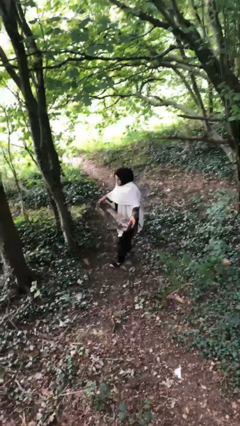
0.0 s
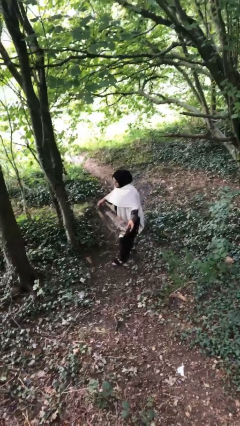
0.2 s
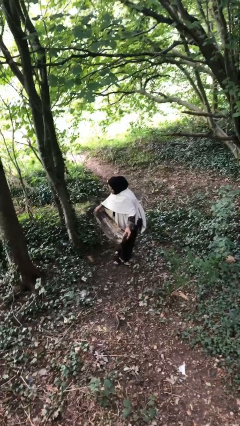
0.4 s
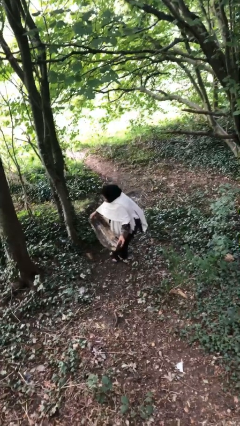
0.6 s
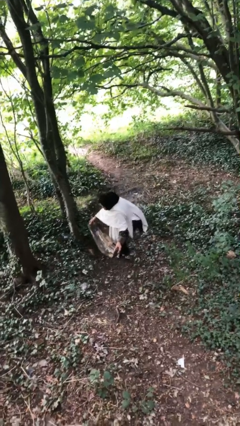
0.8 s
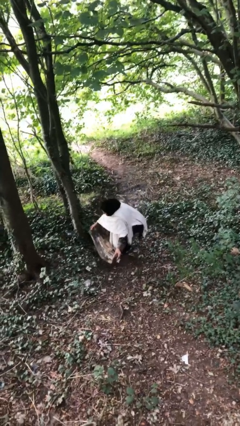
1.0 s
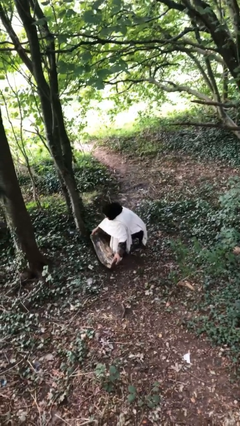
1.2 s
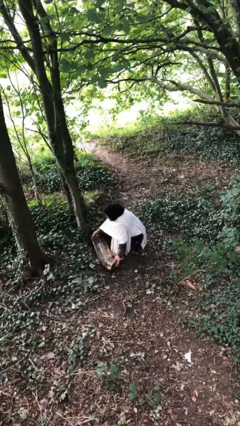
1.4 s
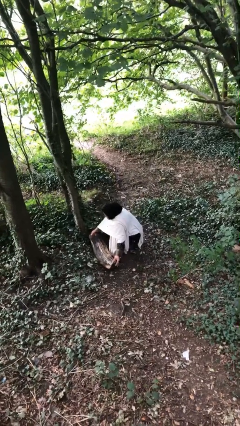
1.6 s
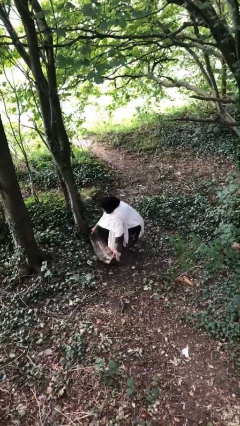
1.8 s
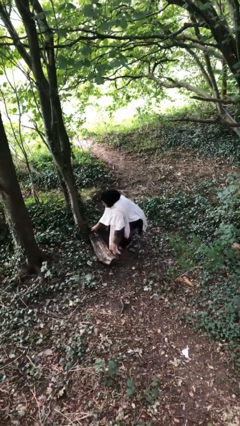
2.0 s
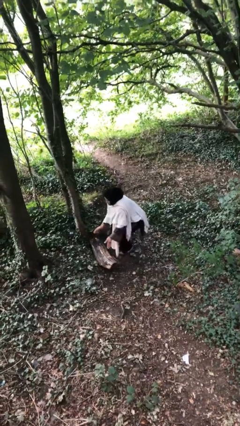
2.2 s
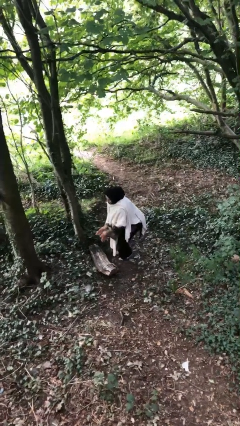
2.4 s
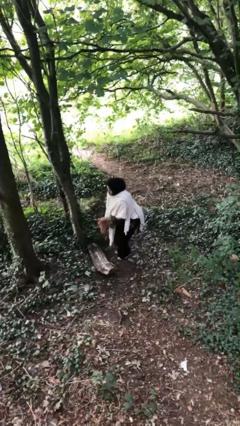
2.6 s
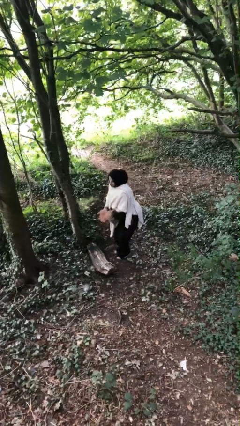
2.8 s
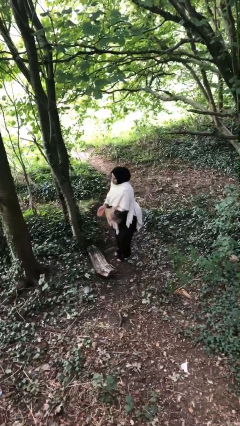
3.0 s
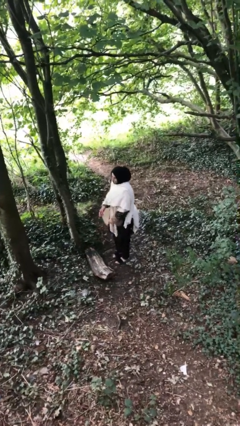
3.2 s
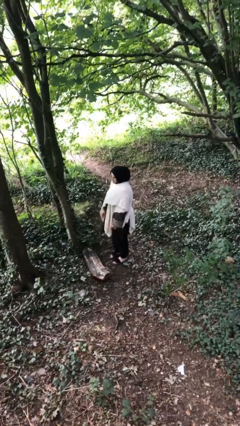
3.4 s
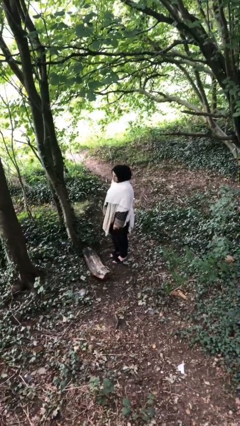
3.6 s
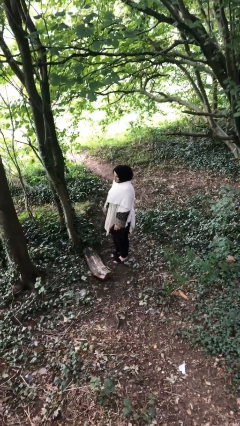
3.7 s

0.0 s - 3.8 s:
person puts down object on floor

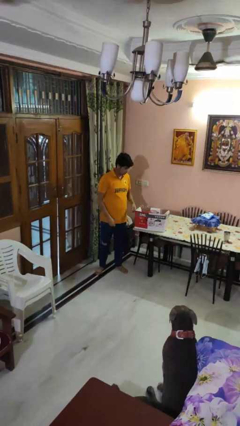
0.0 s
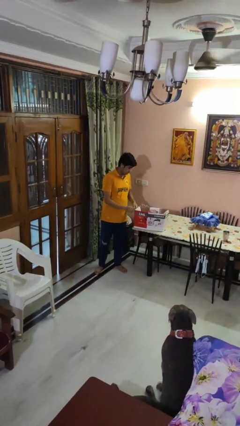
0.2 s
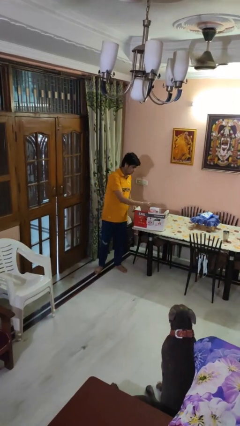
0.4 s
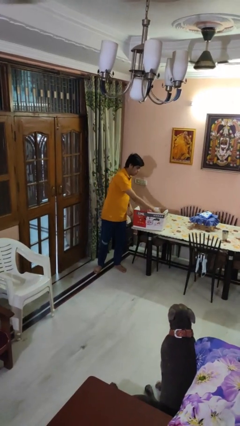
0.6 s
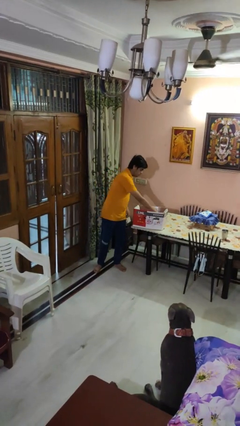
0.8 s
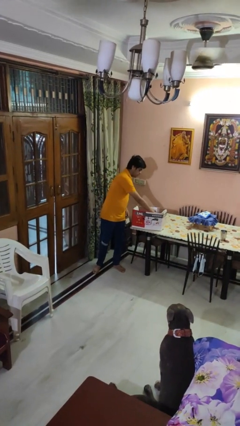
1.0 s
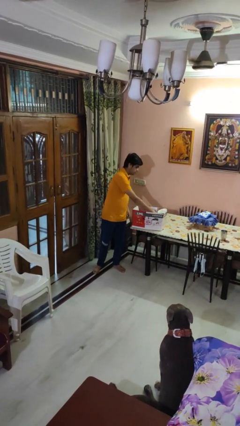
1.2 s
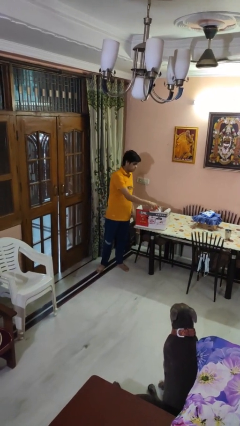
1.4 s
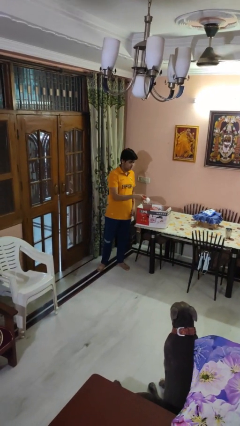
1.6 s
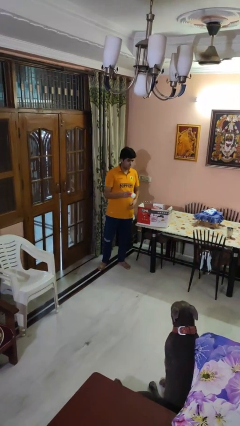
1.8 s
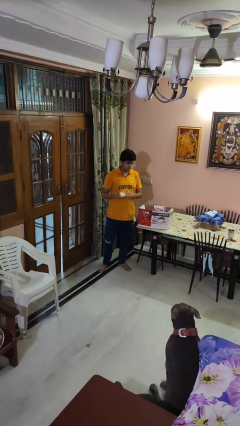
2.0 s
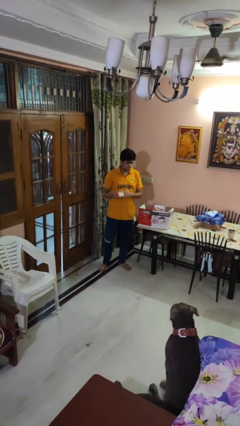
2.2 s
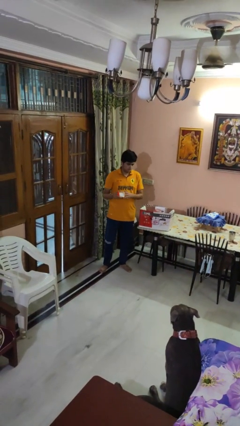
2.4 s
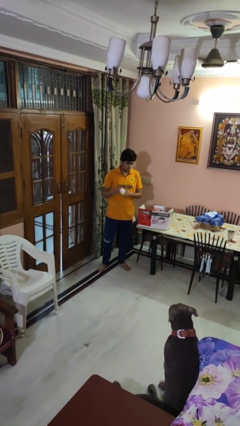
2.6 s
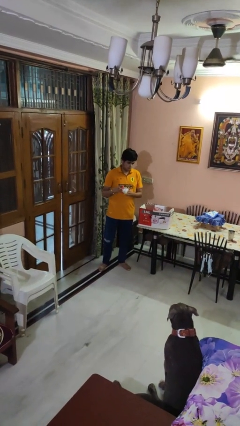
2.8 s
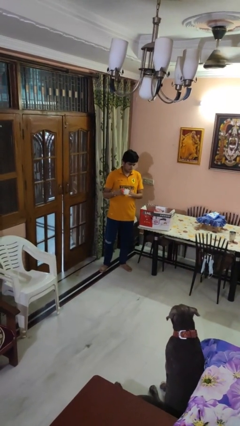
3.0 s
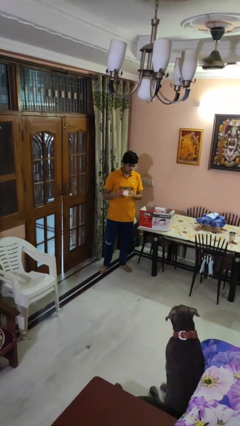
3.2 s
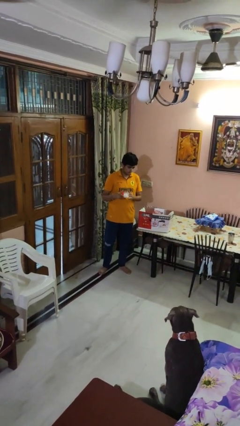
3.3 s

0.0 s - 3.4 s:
person takes object from box

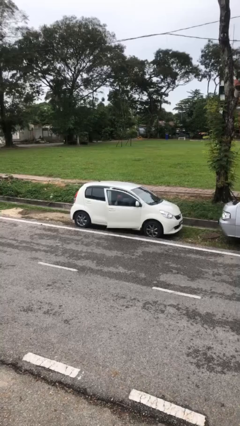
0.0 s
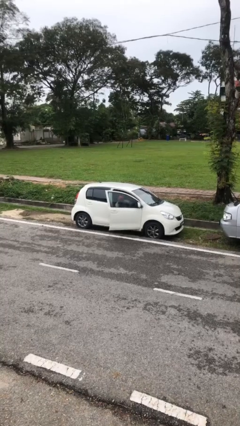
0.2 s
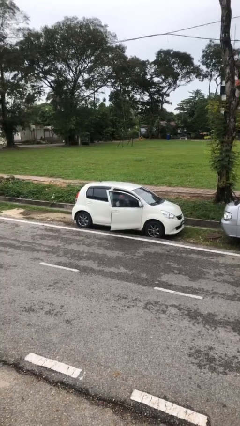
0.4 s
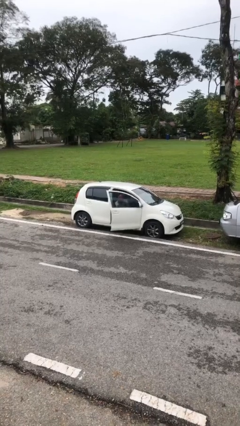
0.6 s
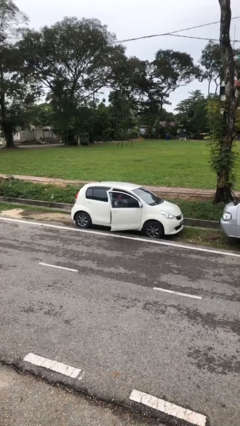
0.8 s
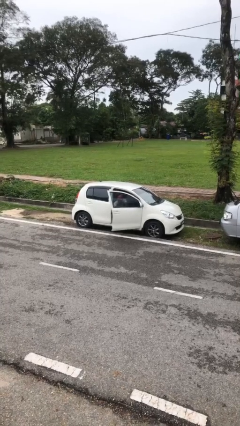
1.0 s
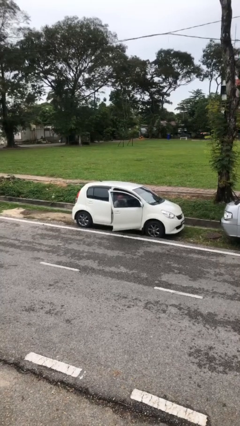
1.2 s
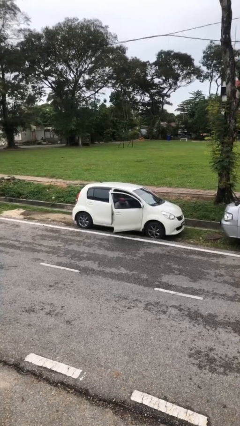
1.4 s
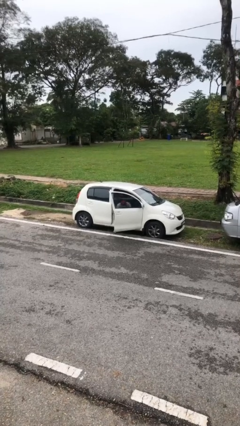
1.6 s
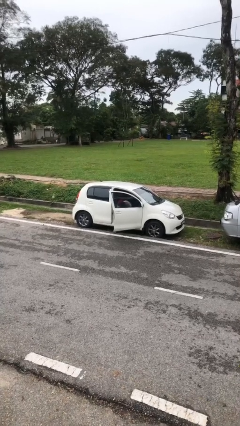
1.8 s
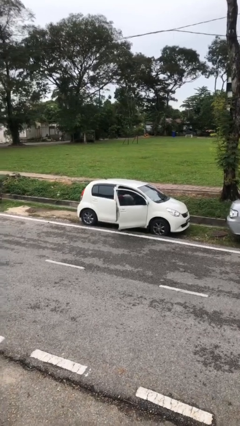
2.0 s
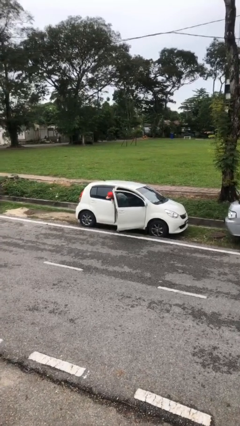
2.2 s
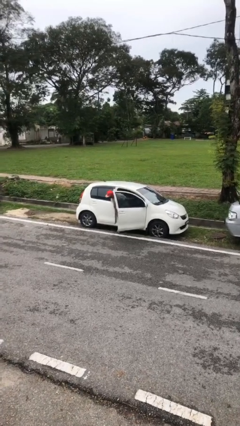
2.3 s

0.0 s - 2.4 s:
person opens car door

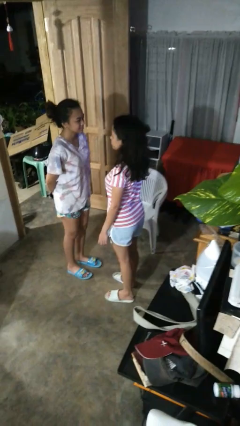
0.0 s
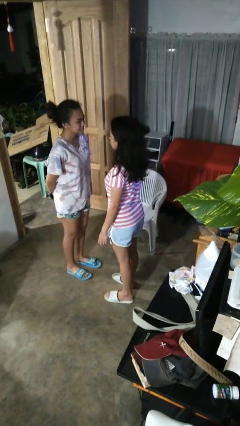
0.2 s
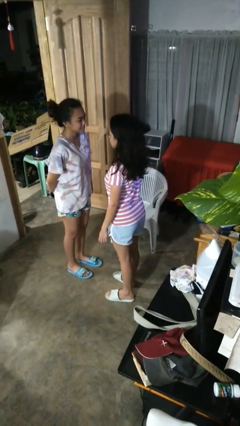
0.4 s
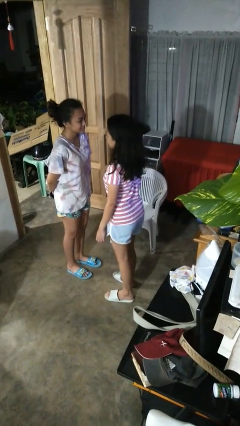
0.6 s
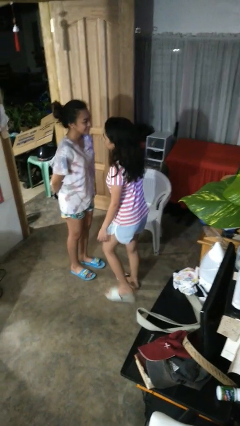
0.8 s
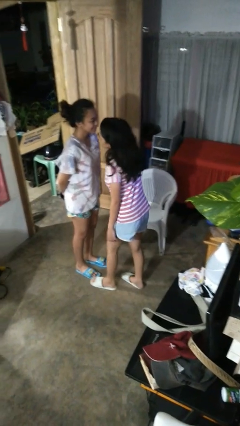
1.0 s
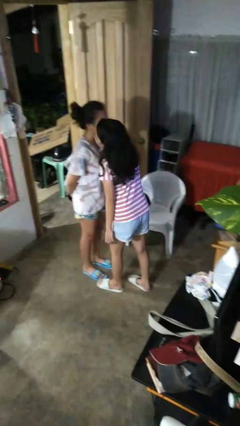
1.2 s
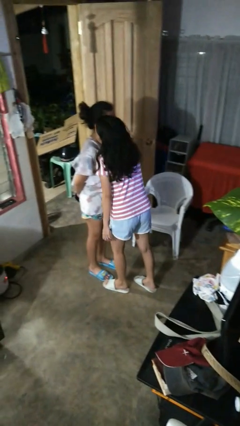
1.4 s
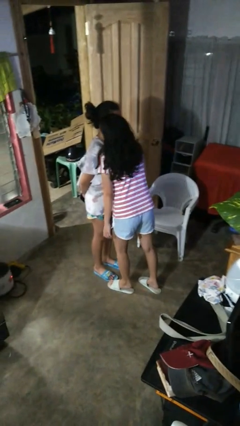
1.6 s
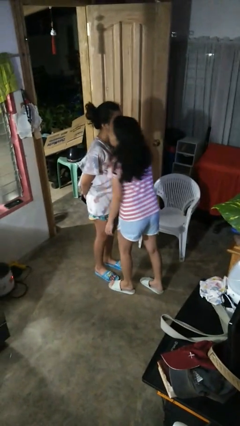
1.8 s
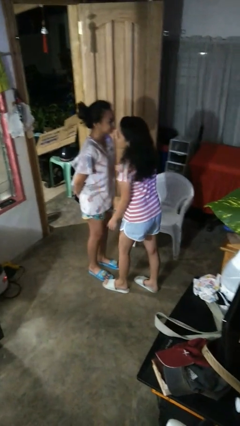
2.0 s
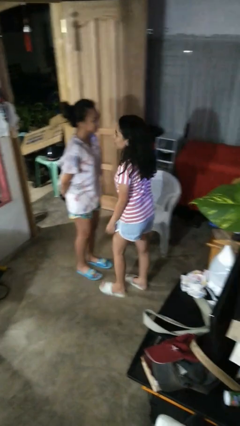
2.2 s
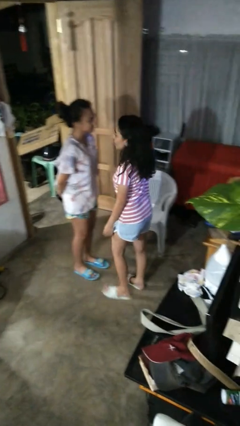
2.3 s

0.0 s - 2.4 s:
person kisses cheek of person

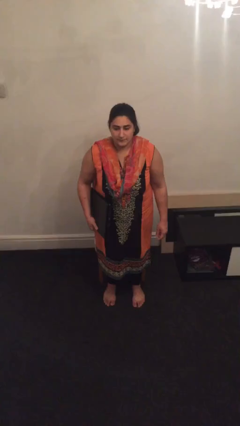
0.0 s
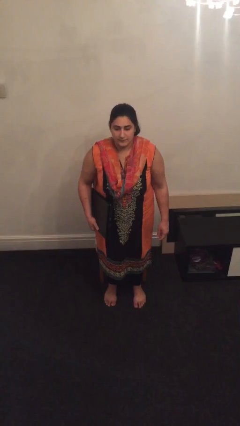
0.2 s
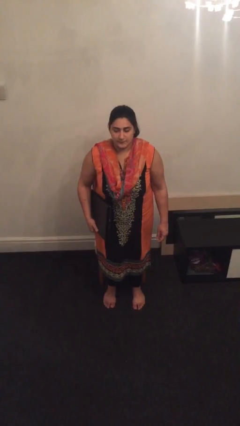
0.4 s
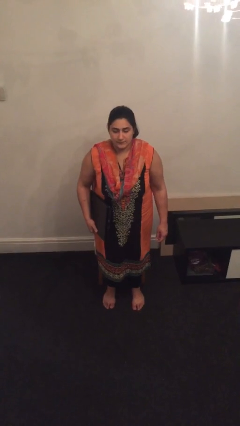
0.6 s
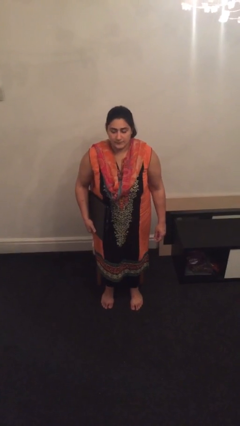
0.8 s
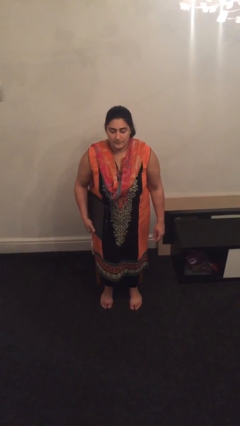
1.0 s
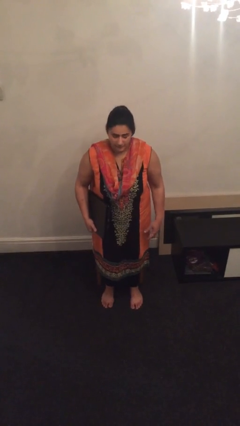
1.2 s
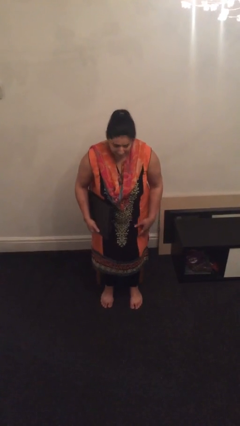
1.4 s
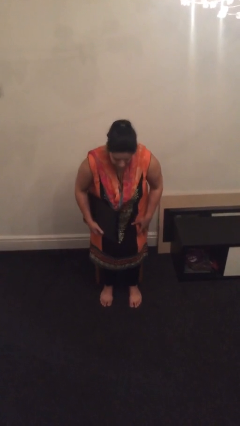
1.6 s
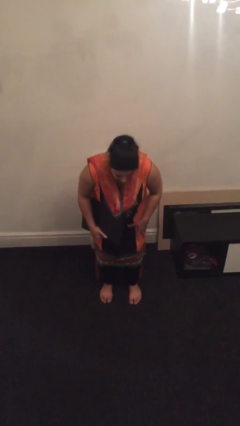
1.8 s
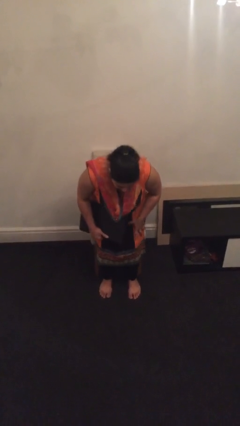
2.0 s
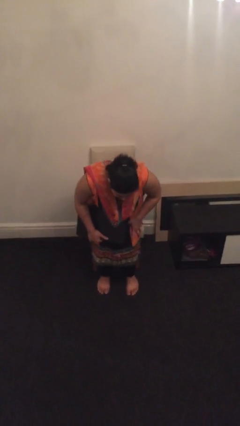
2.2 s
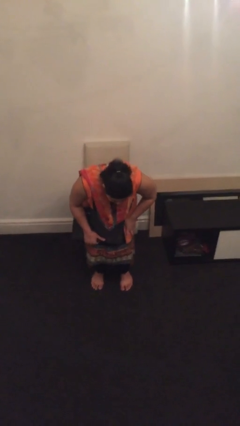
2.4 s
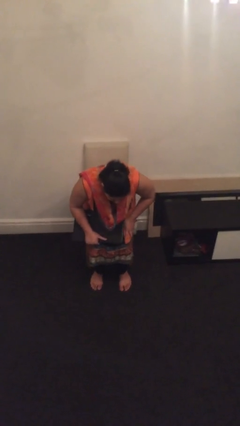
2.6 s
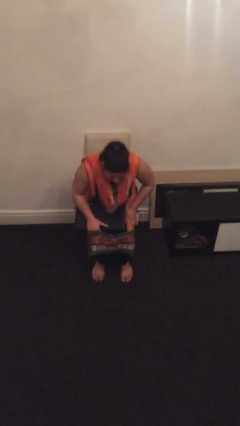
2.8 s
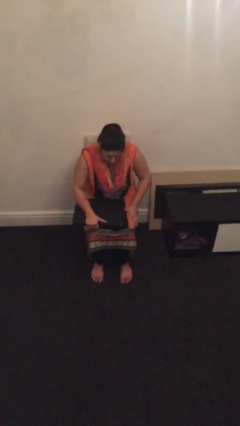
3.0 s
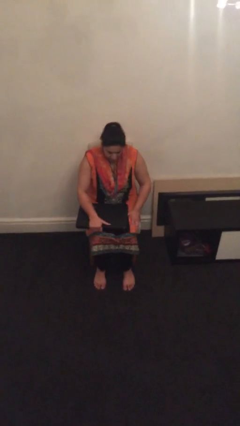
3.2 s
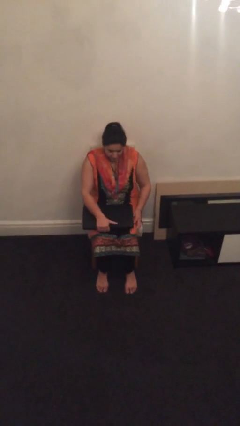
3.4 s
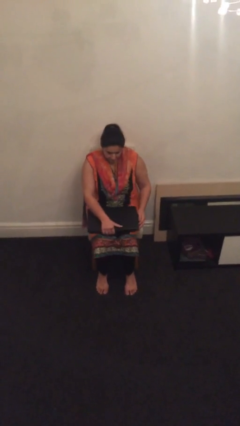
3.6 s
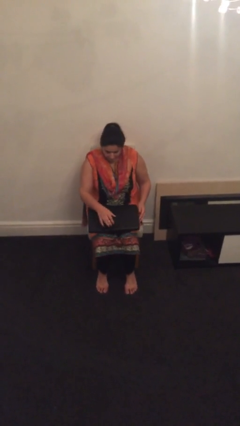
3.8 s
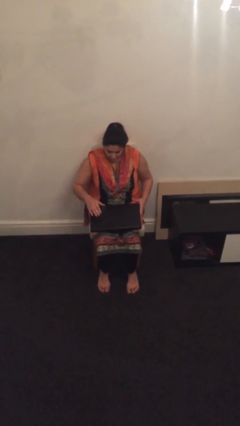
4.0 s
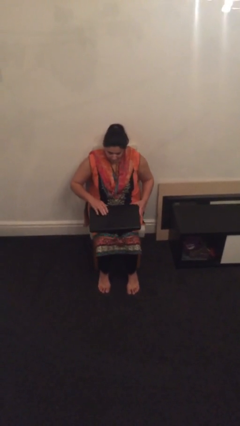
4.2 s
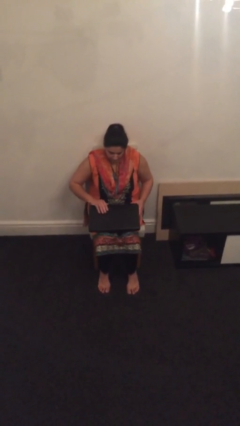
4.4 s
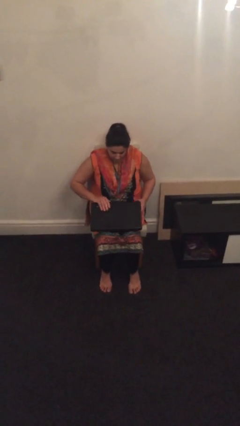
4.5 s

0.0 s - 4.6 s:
person sits down

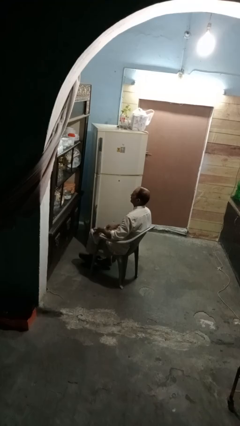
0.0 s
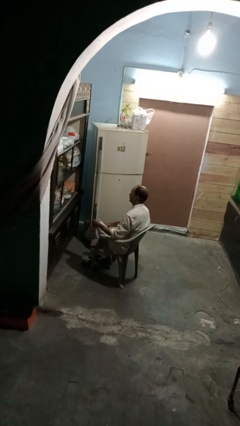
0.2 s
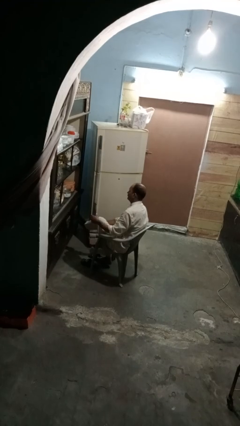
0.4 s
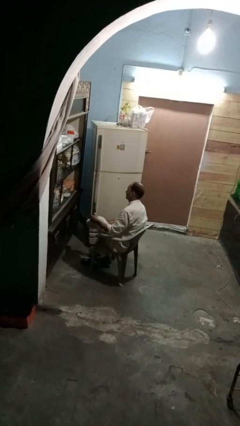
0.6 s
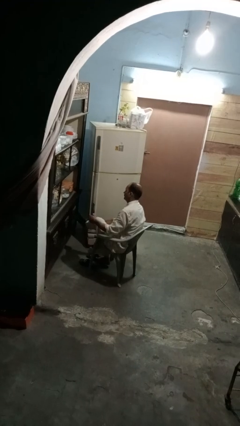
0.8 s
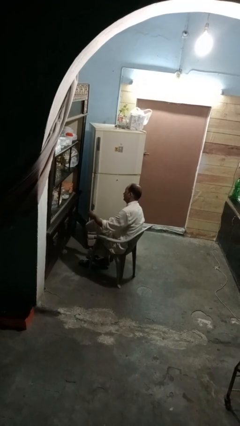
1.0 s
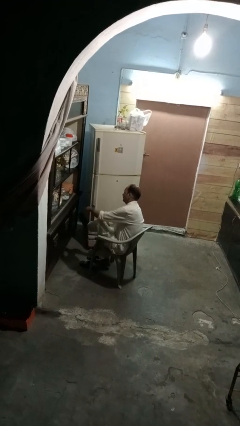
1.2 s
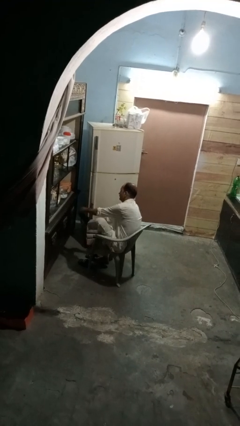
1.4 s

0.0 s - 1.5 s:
person takes off socks
